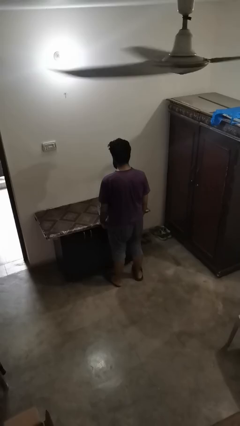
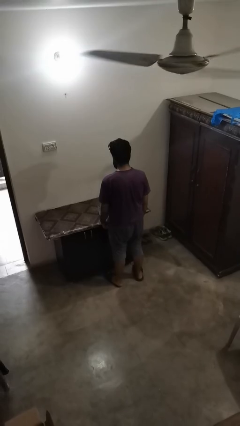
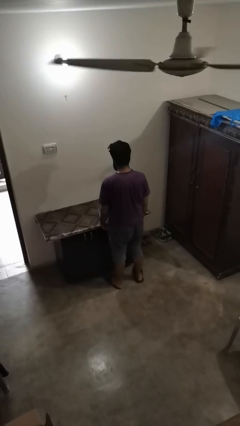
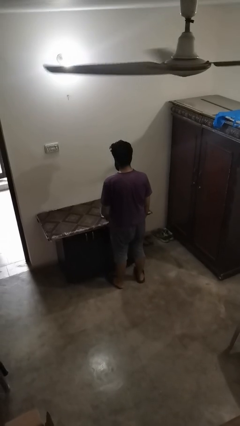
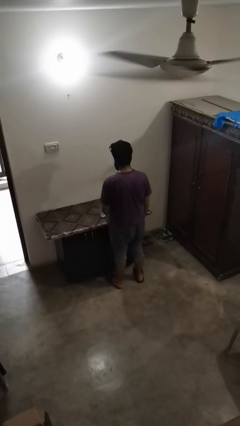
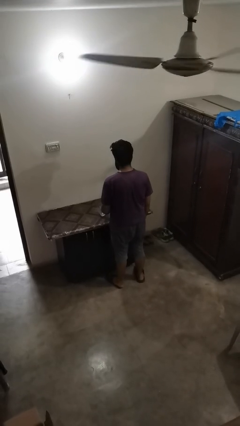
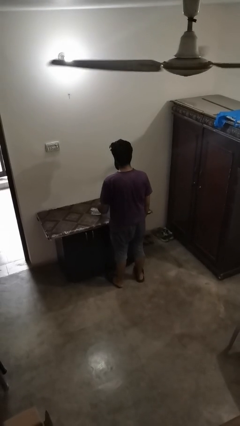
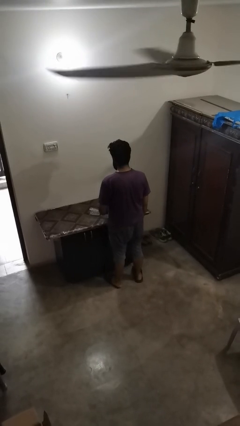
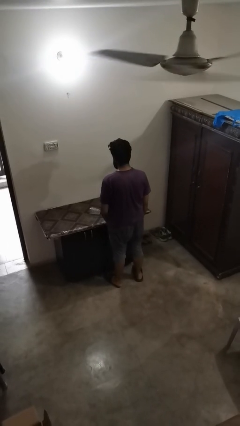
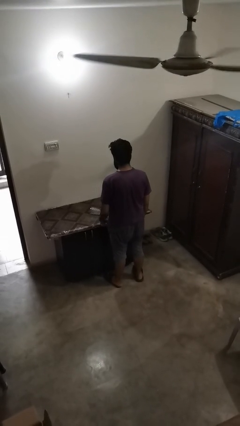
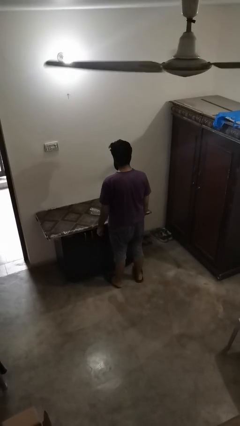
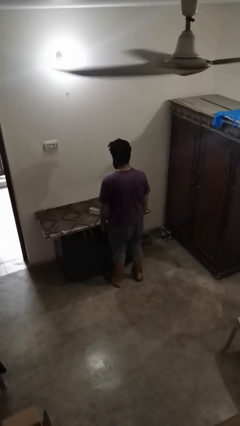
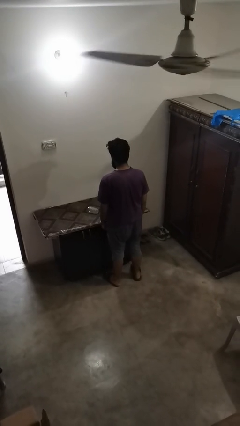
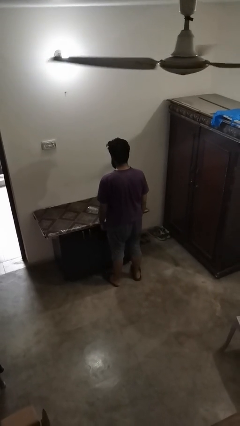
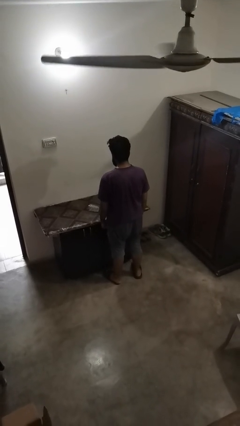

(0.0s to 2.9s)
person spills on table

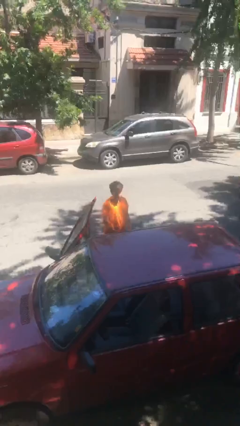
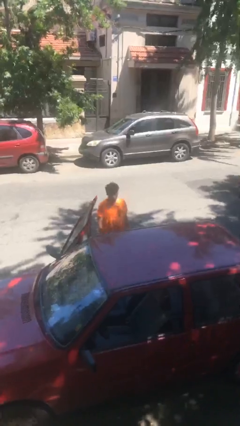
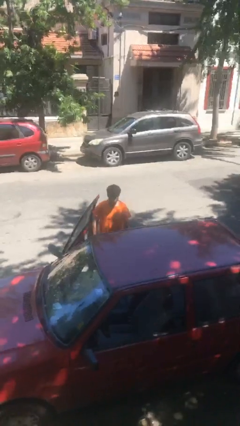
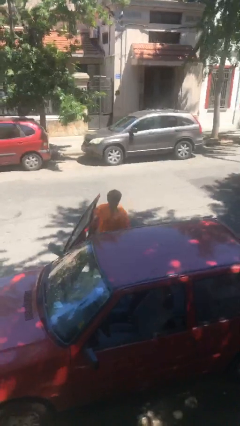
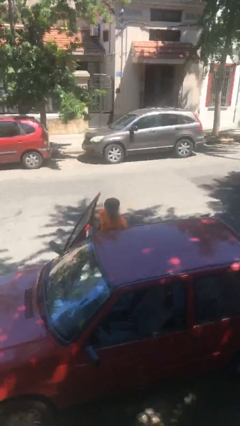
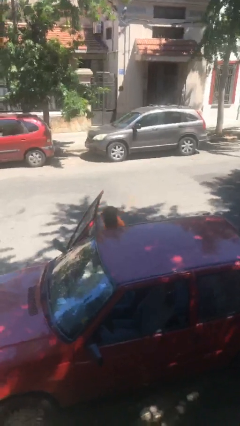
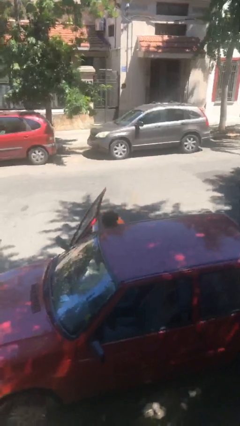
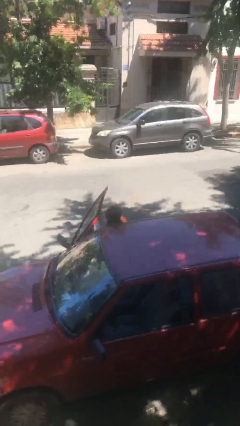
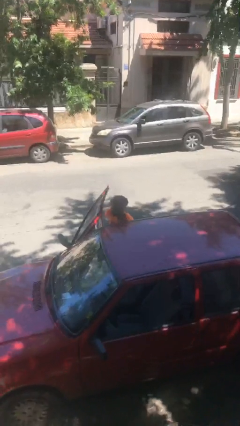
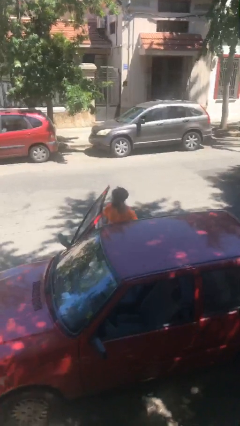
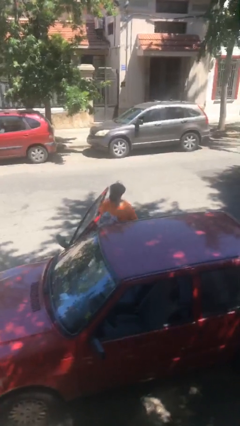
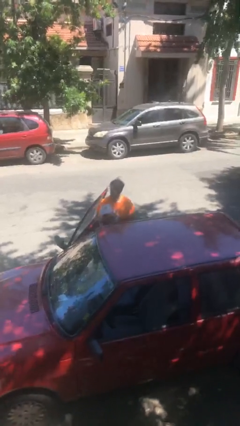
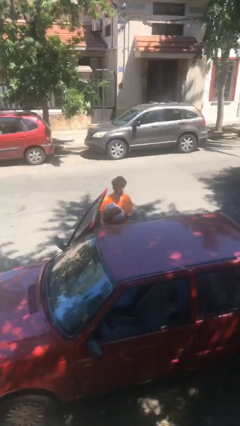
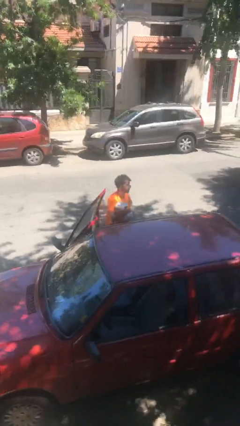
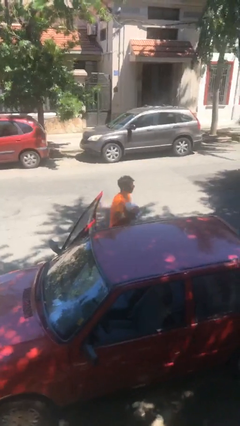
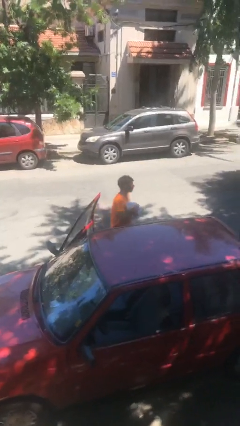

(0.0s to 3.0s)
person unloads car

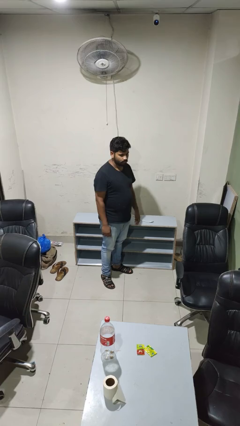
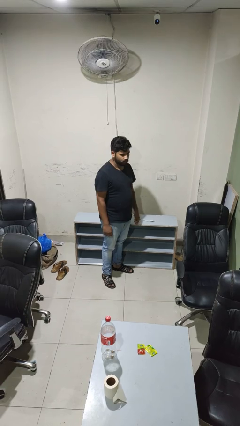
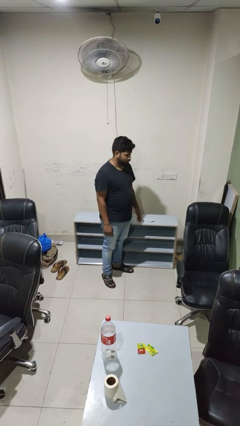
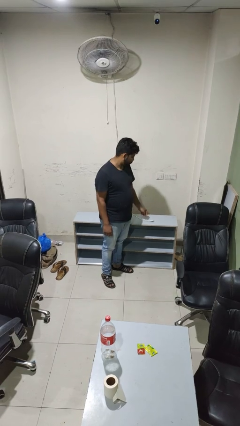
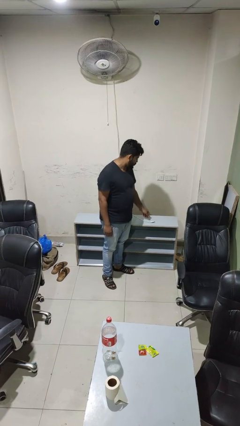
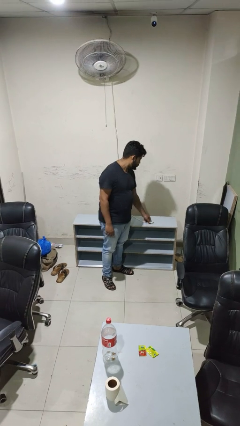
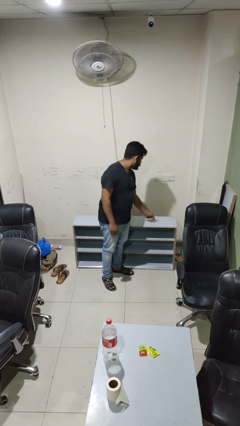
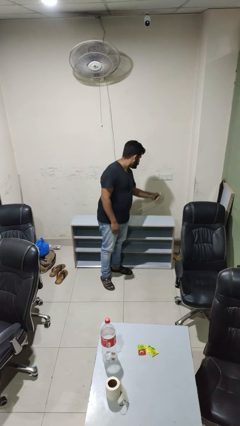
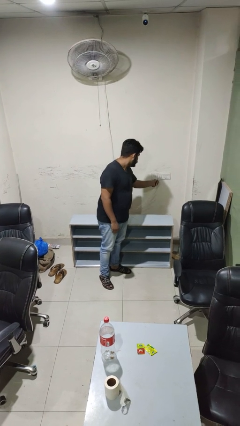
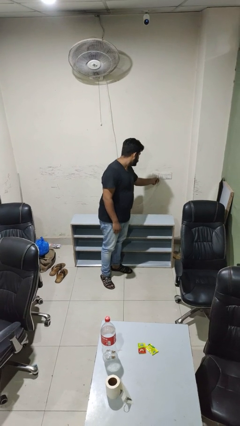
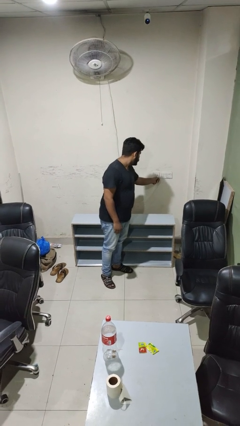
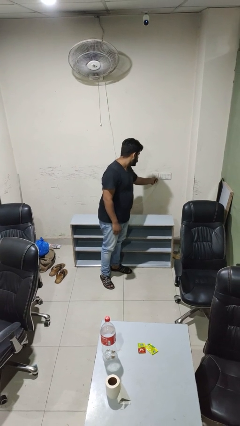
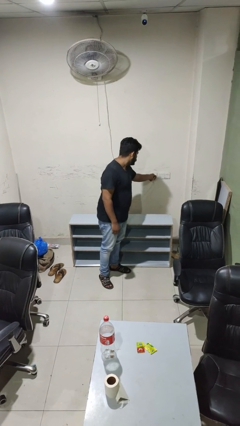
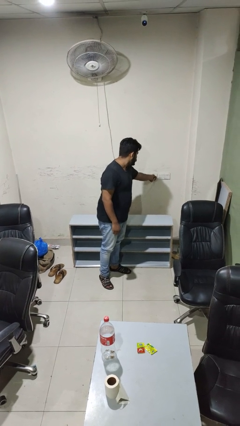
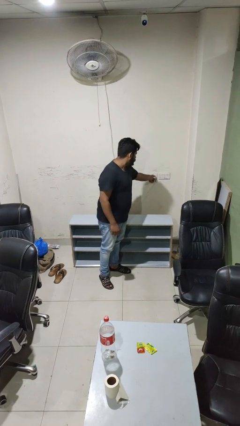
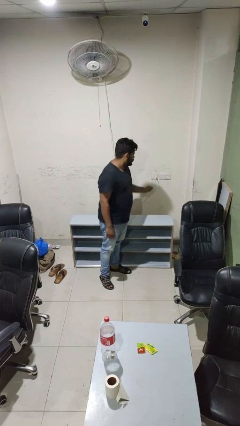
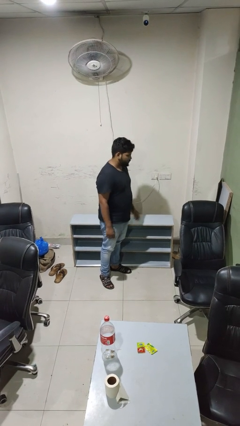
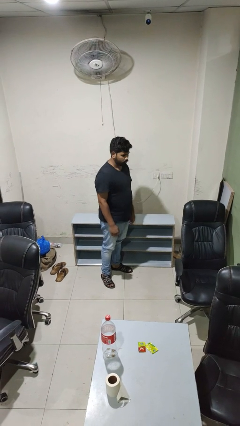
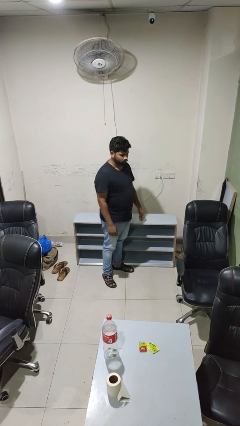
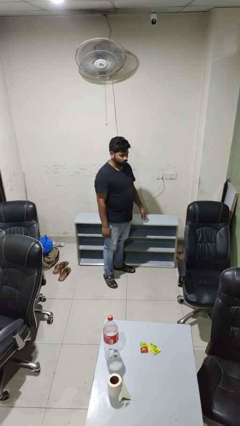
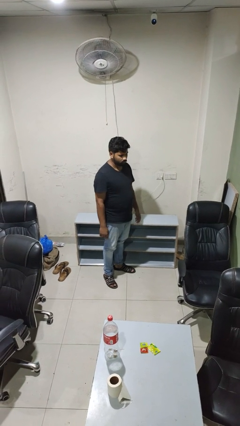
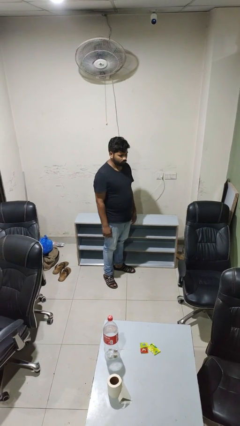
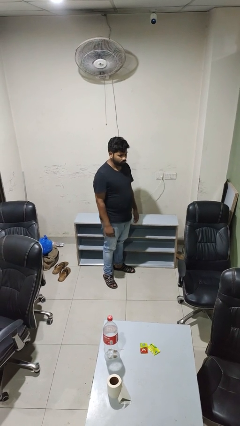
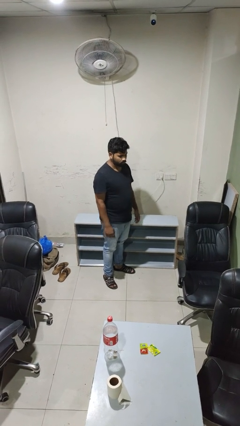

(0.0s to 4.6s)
person plugs into electrical socket

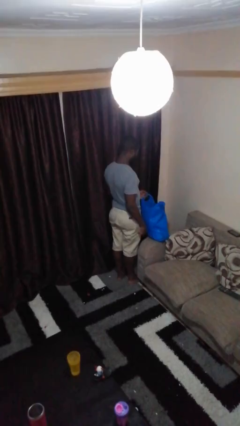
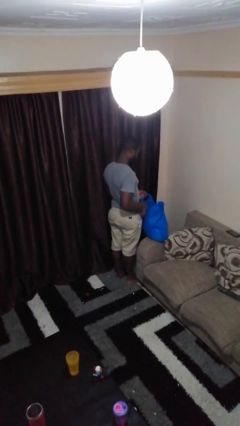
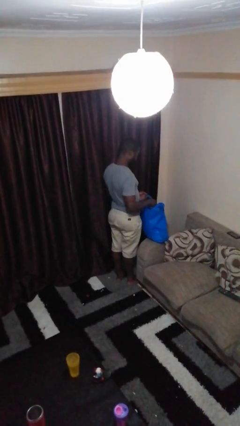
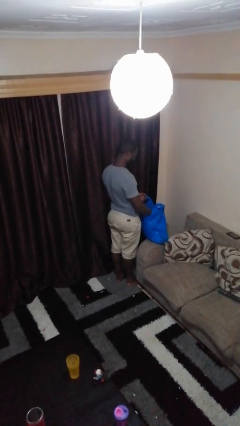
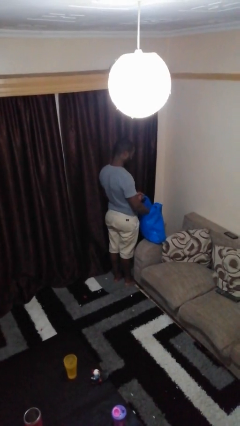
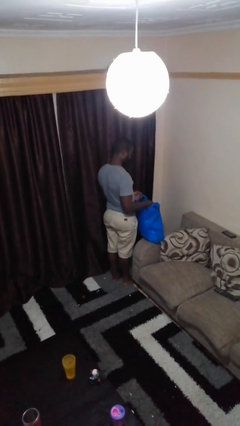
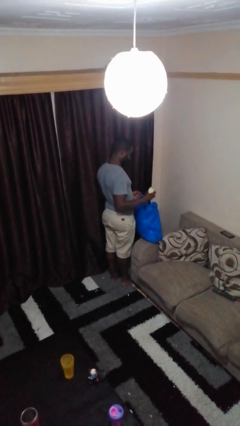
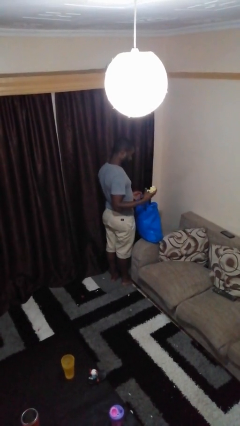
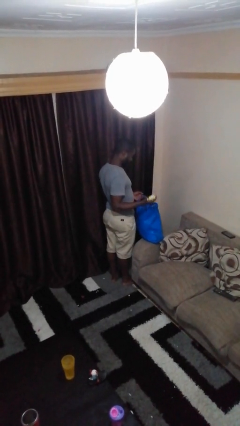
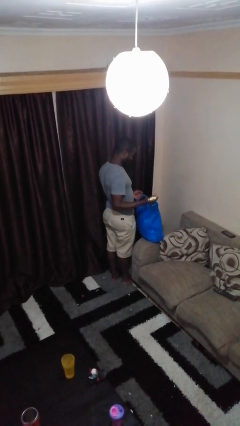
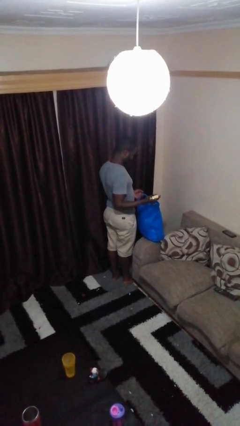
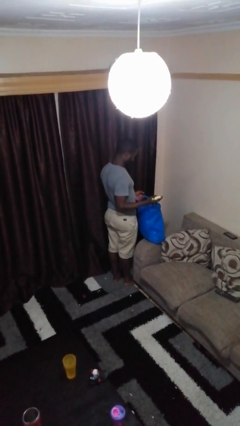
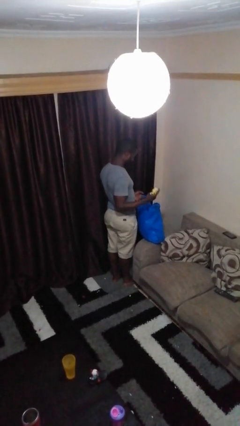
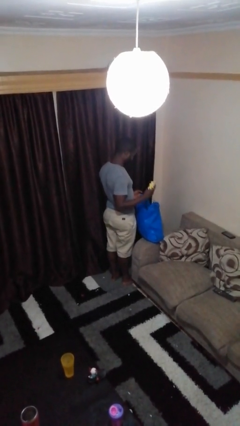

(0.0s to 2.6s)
person takes object from bag

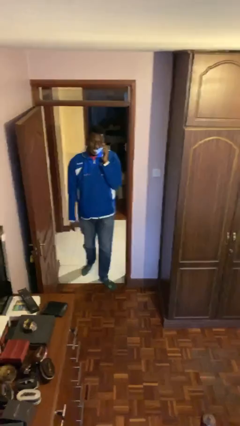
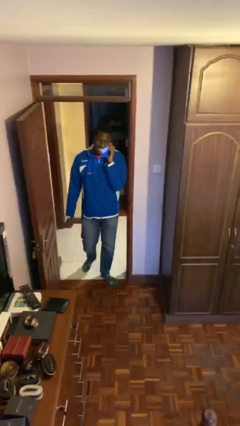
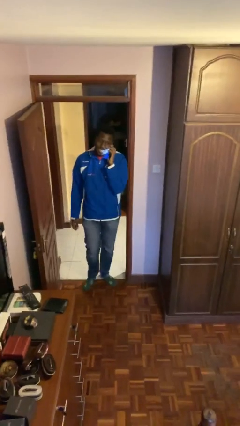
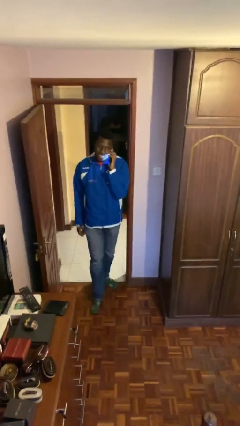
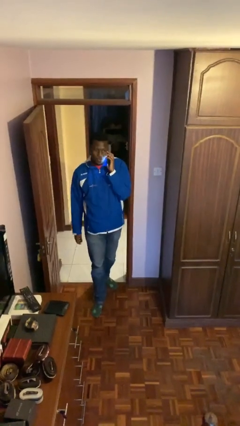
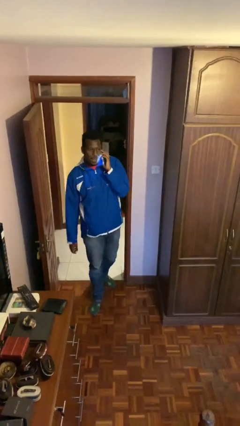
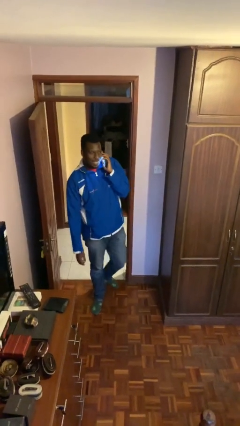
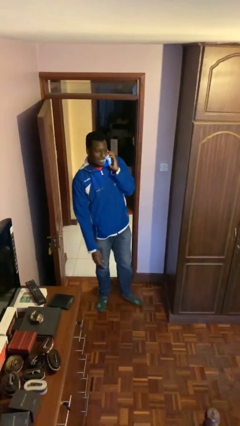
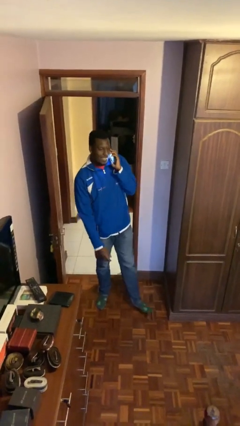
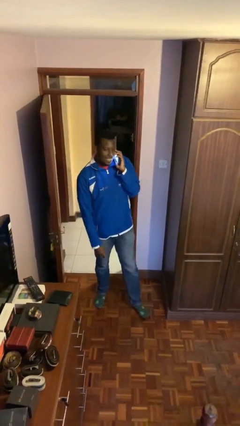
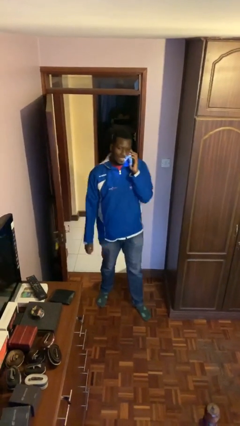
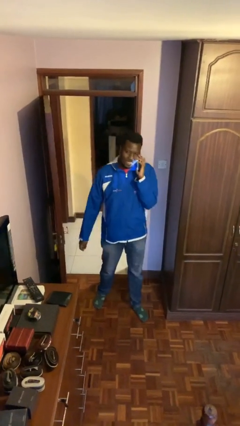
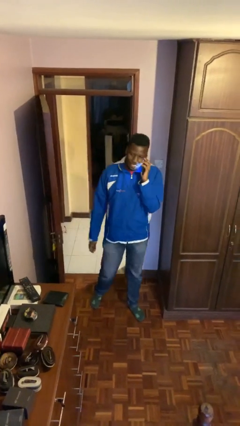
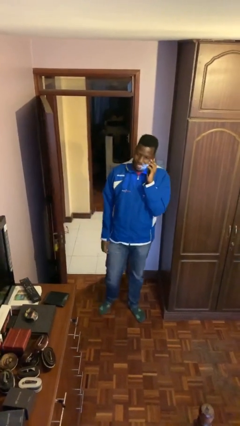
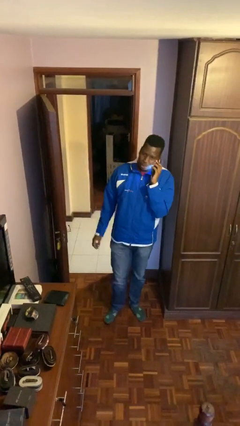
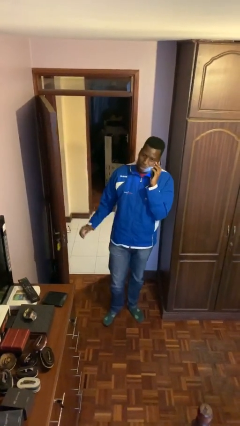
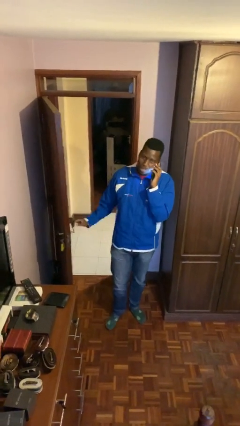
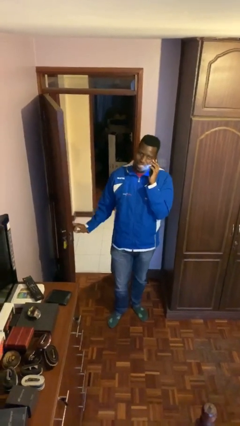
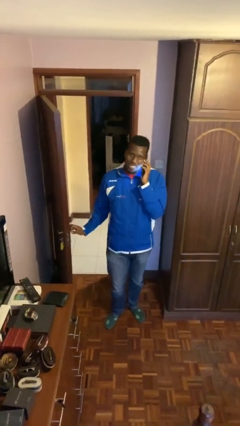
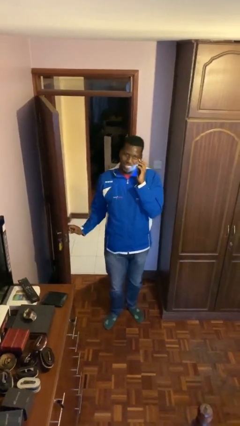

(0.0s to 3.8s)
person enters scene through structure

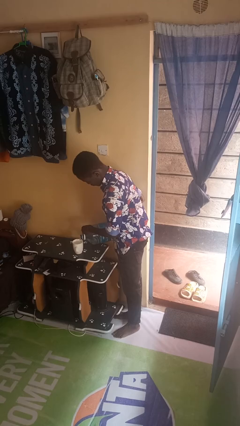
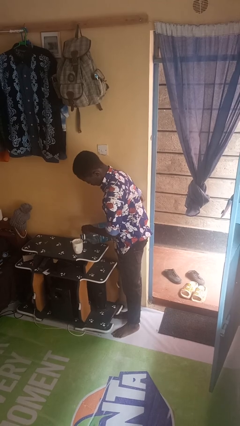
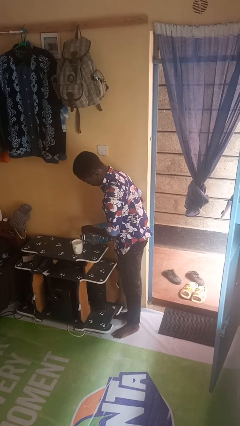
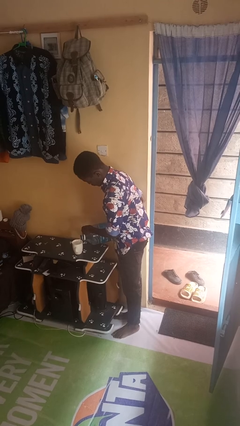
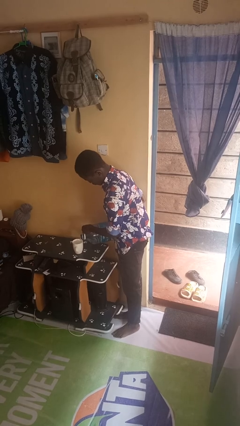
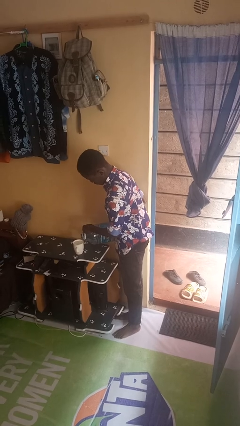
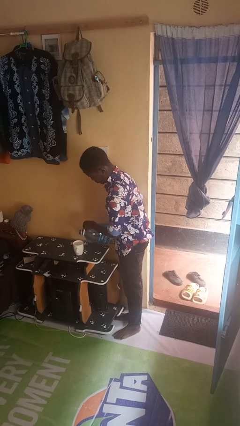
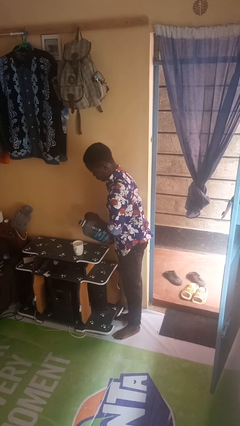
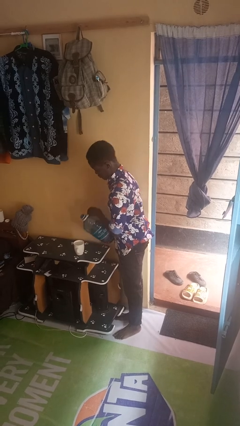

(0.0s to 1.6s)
person pours liquid into cup
